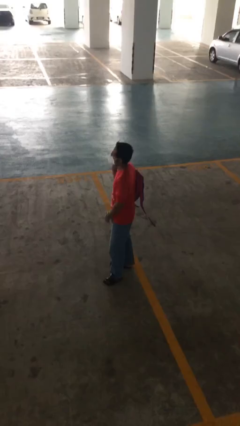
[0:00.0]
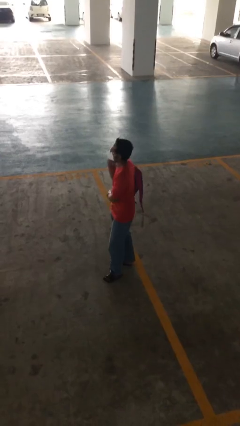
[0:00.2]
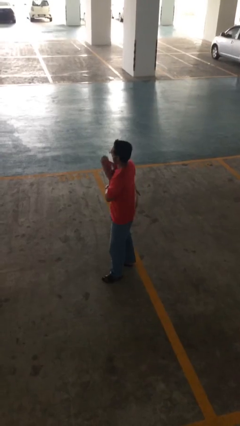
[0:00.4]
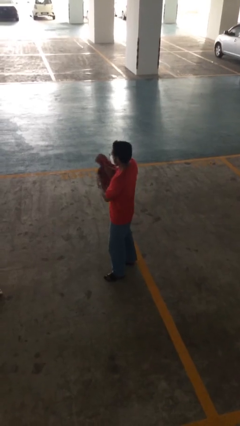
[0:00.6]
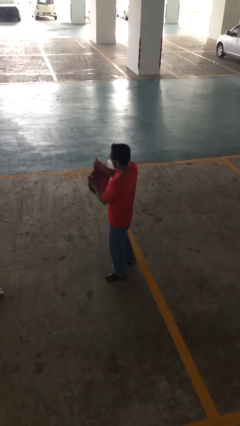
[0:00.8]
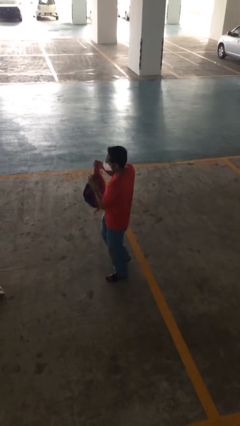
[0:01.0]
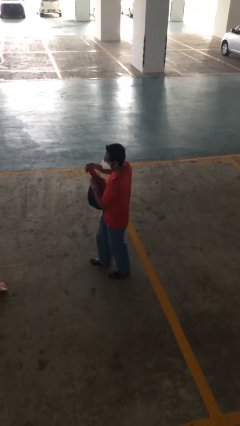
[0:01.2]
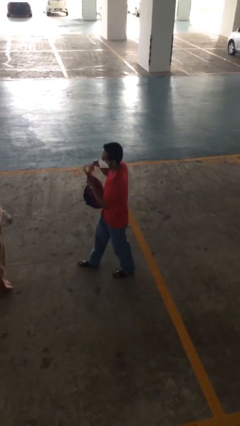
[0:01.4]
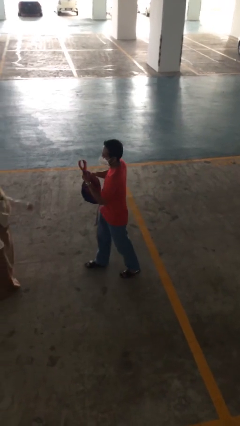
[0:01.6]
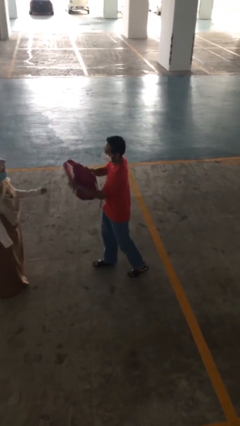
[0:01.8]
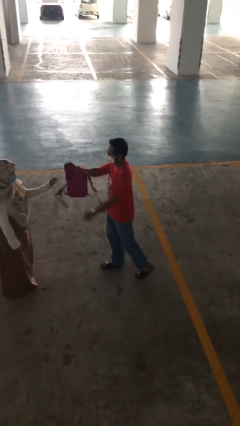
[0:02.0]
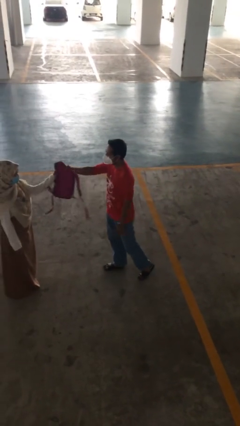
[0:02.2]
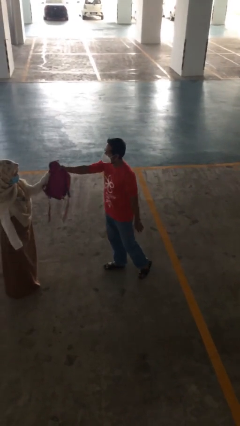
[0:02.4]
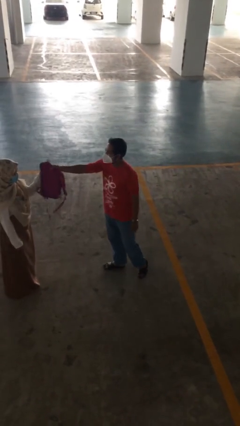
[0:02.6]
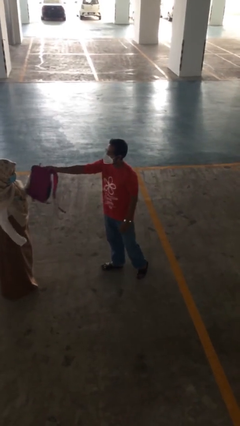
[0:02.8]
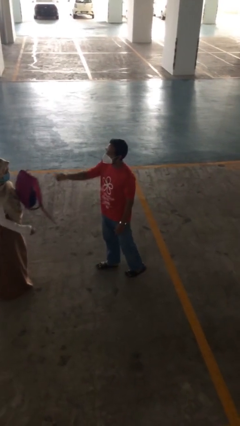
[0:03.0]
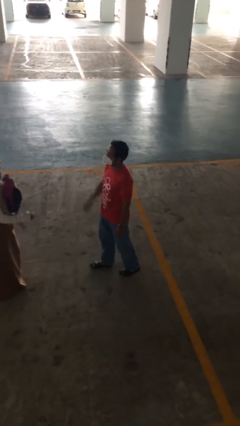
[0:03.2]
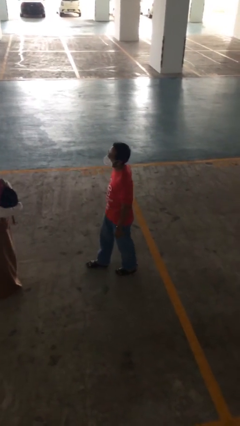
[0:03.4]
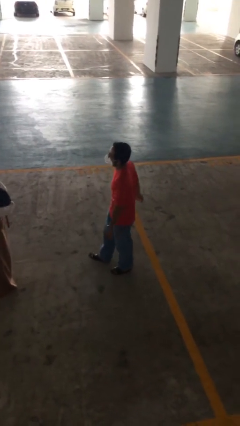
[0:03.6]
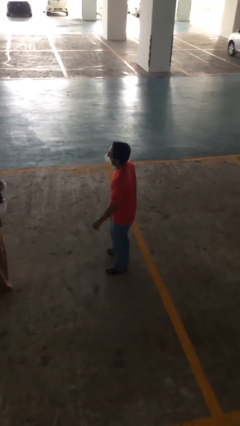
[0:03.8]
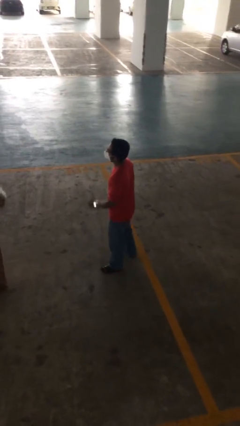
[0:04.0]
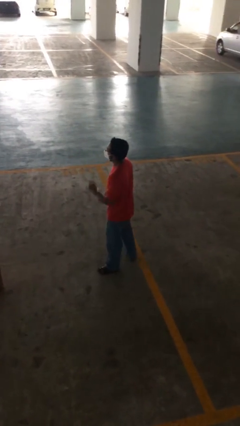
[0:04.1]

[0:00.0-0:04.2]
person transfers object to person

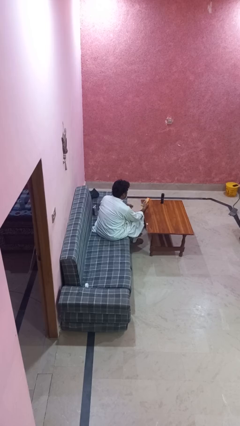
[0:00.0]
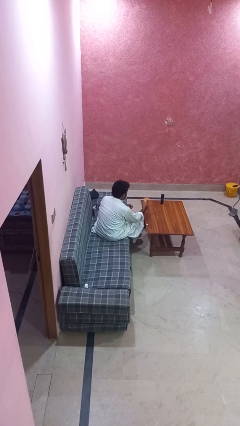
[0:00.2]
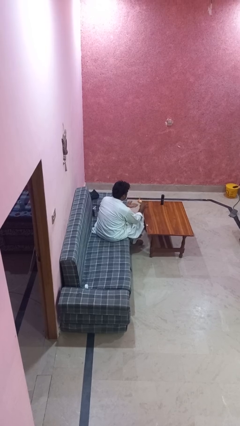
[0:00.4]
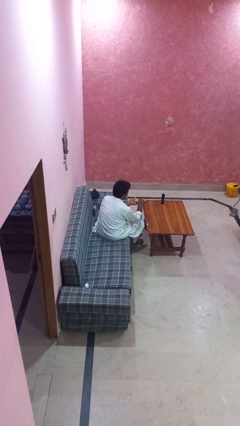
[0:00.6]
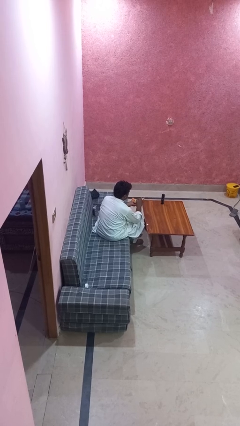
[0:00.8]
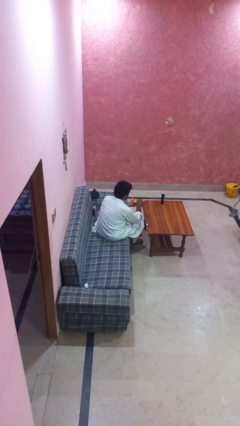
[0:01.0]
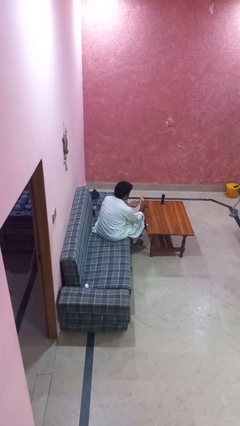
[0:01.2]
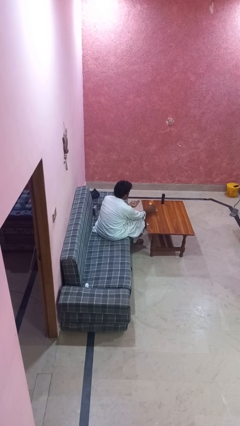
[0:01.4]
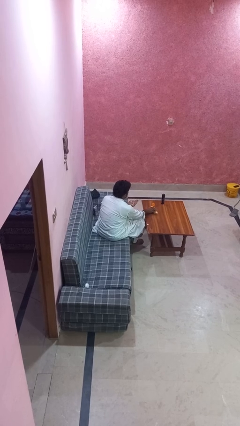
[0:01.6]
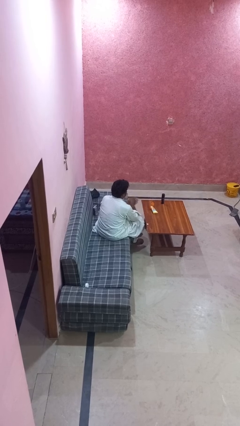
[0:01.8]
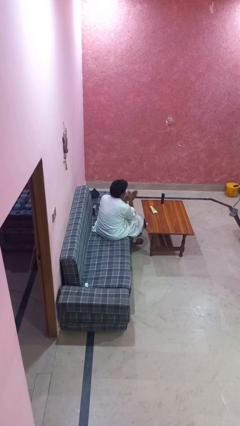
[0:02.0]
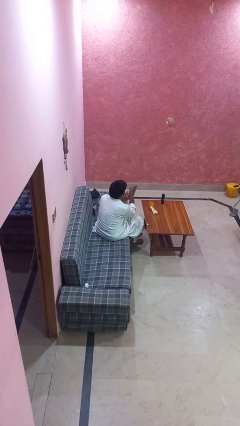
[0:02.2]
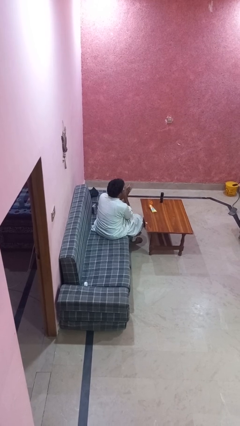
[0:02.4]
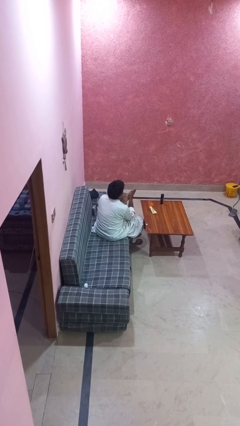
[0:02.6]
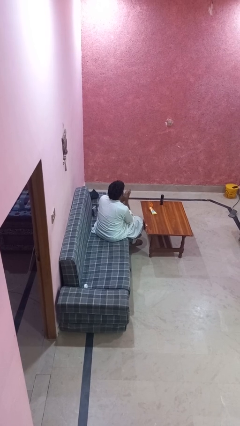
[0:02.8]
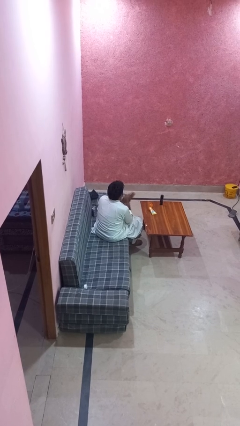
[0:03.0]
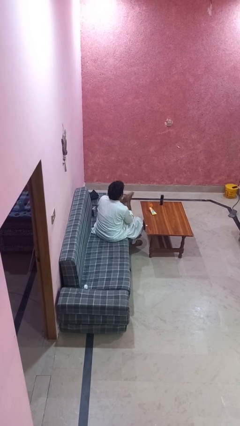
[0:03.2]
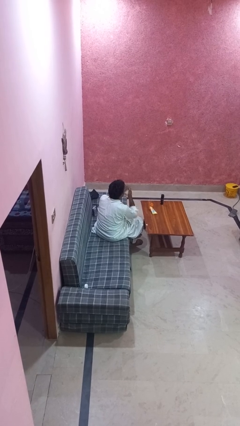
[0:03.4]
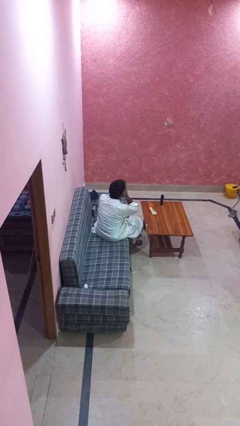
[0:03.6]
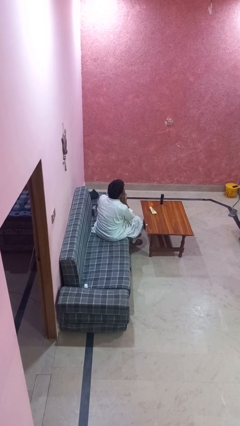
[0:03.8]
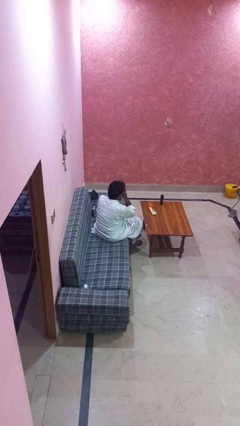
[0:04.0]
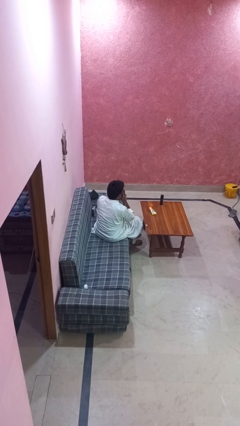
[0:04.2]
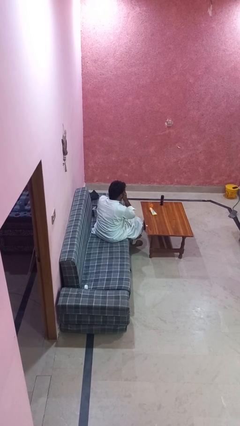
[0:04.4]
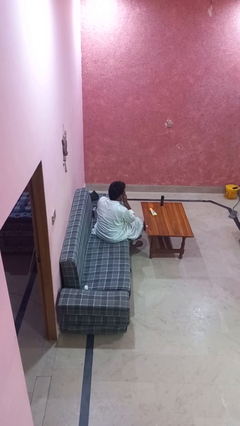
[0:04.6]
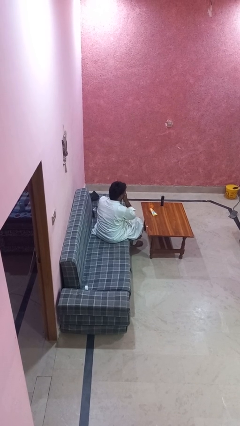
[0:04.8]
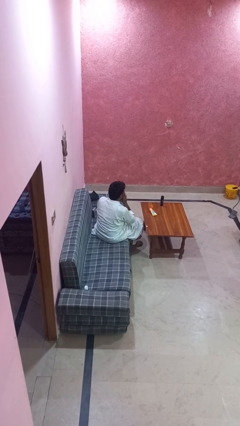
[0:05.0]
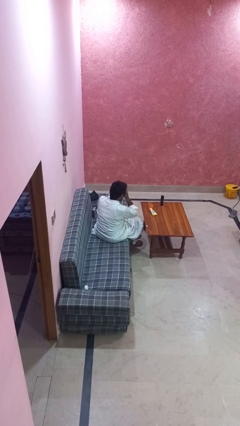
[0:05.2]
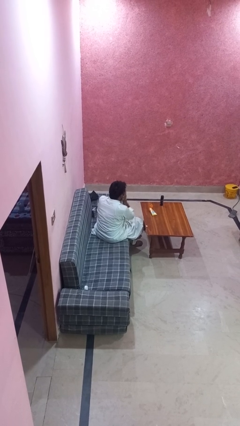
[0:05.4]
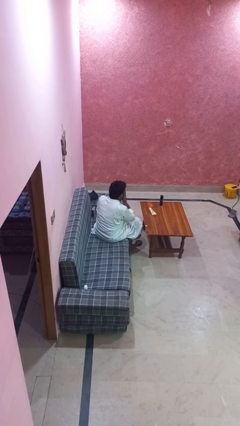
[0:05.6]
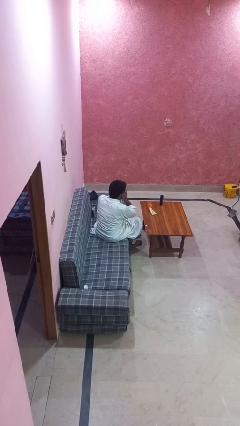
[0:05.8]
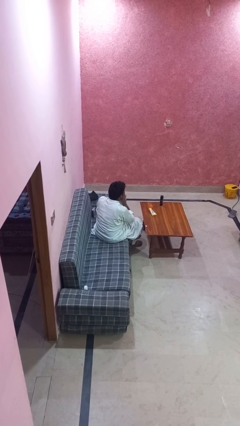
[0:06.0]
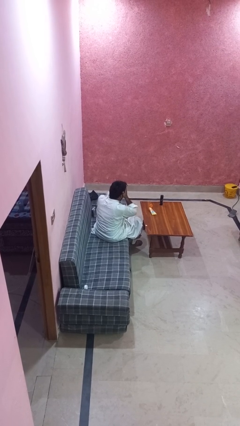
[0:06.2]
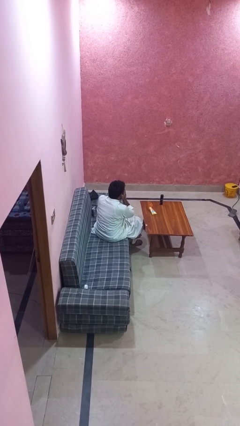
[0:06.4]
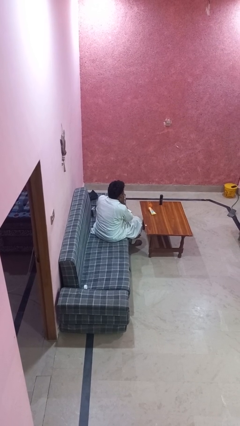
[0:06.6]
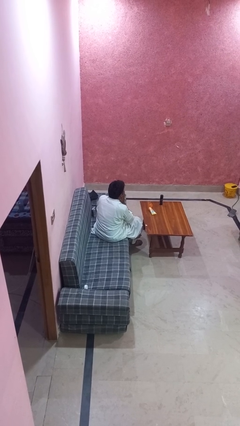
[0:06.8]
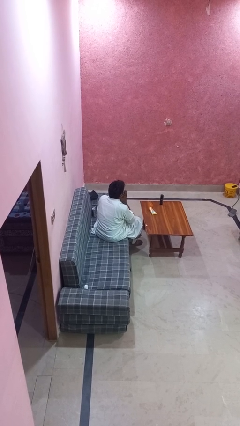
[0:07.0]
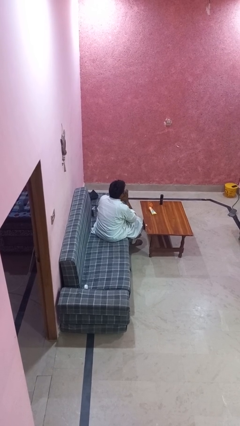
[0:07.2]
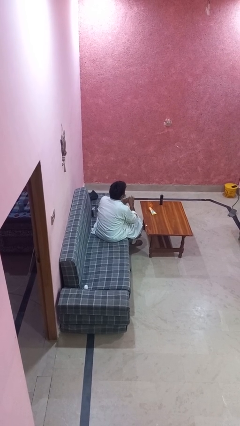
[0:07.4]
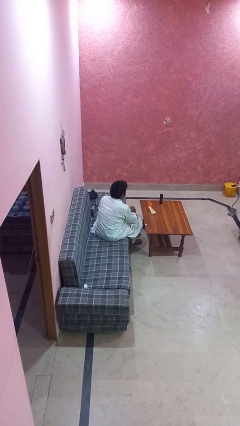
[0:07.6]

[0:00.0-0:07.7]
person applies sunscreen

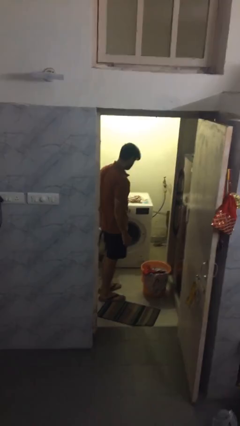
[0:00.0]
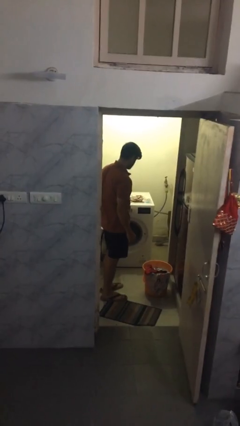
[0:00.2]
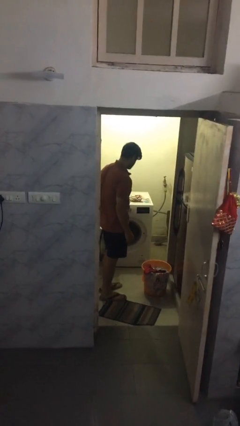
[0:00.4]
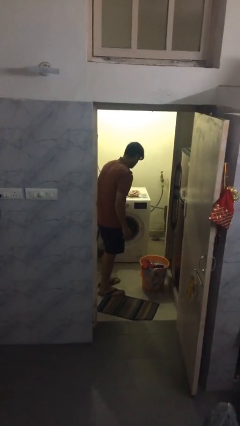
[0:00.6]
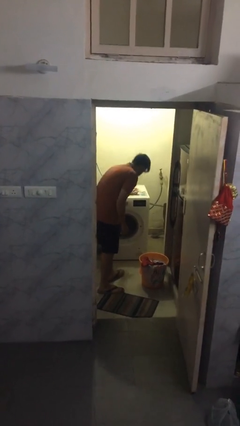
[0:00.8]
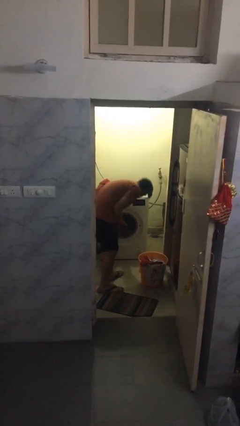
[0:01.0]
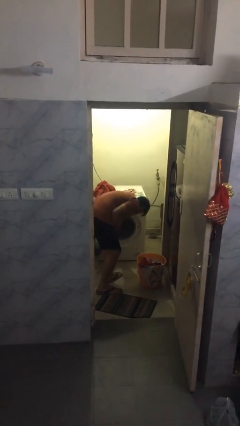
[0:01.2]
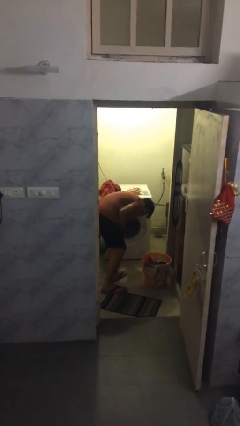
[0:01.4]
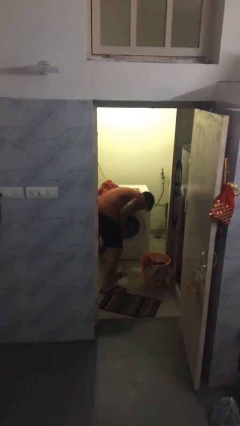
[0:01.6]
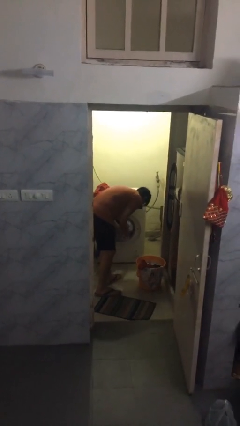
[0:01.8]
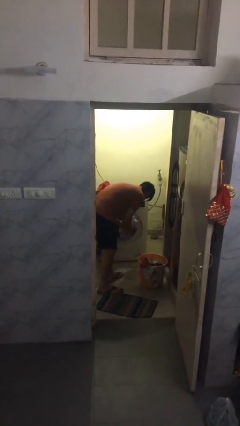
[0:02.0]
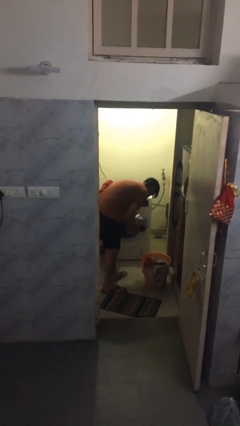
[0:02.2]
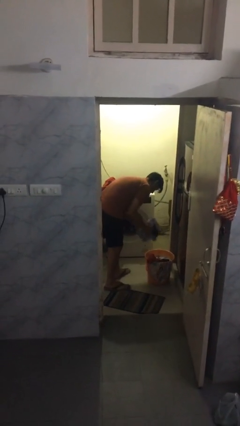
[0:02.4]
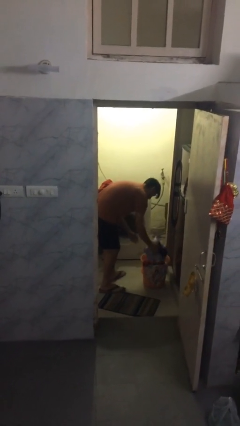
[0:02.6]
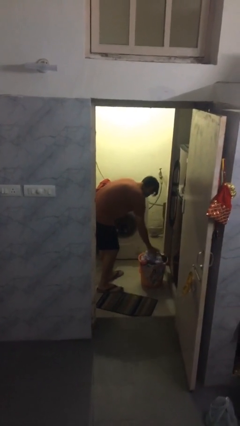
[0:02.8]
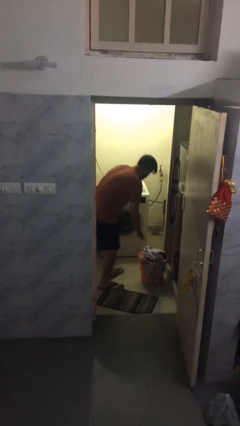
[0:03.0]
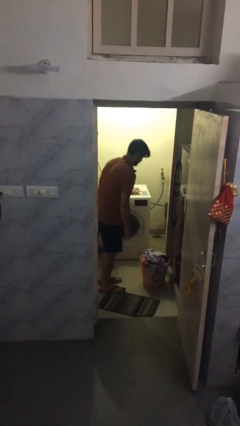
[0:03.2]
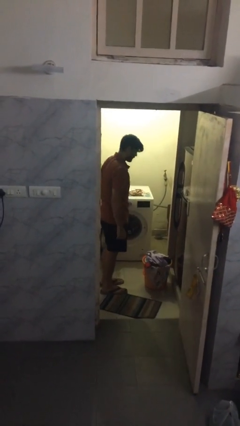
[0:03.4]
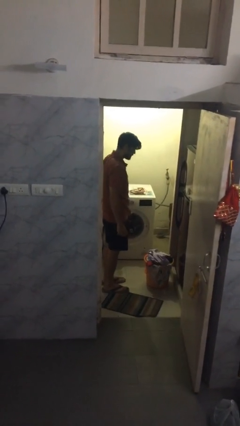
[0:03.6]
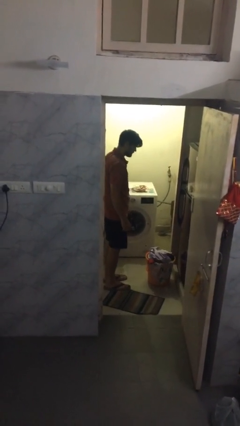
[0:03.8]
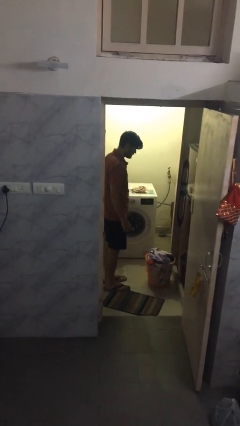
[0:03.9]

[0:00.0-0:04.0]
person unloads dryer

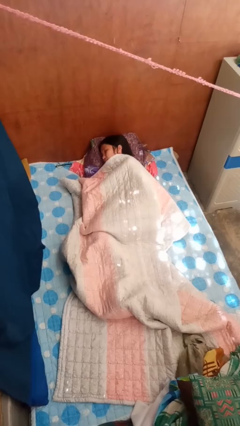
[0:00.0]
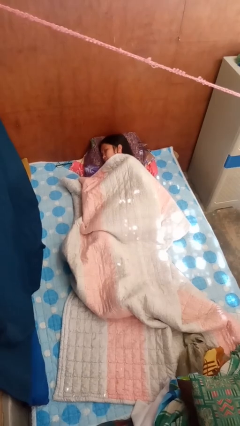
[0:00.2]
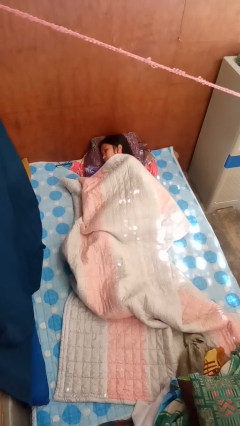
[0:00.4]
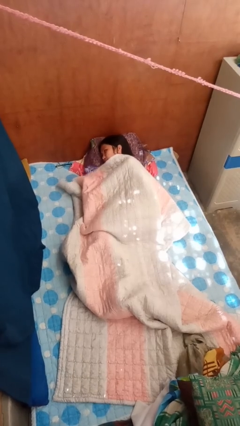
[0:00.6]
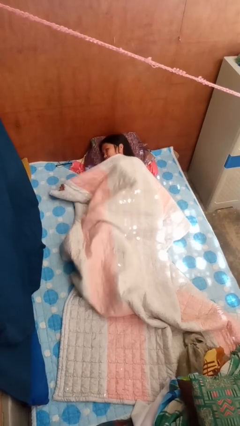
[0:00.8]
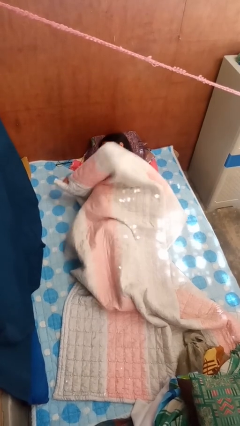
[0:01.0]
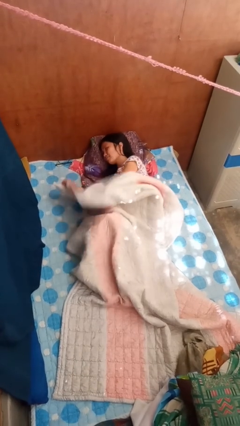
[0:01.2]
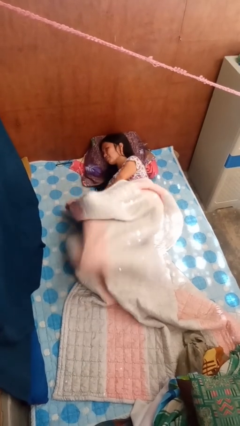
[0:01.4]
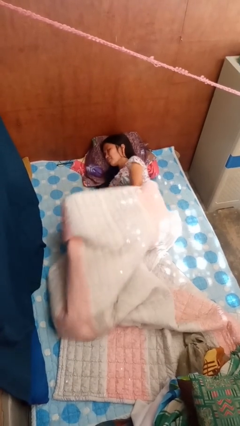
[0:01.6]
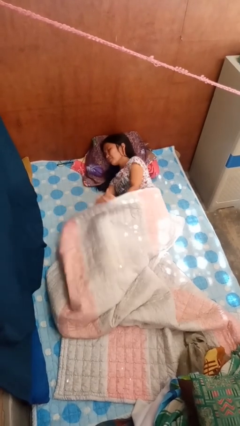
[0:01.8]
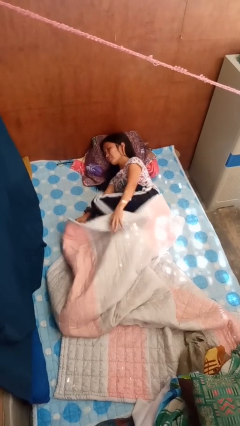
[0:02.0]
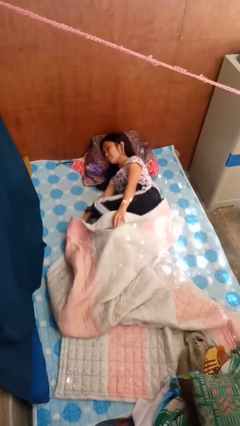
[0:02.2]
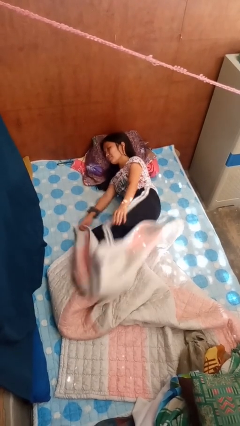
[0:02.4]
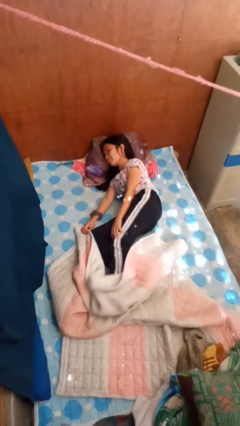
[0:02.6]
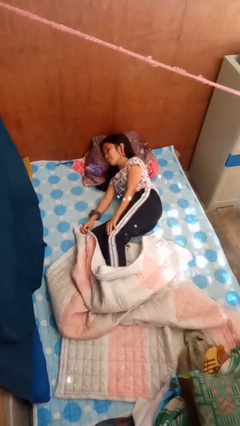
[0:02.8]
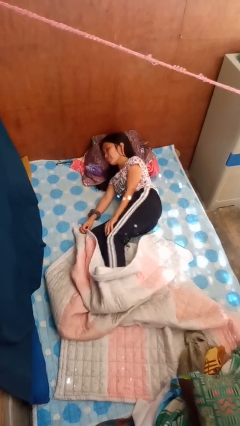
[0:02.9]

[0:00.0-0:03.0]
person uncovers with bedsheets
